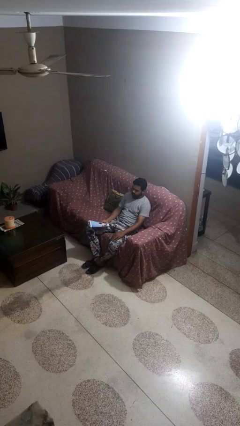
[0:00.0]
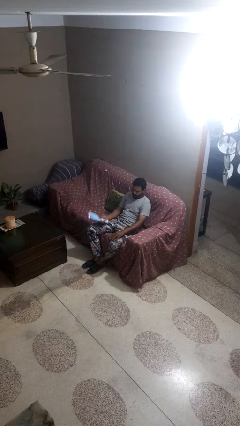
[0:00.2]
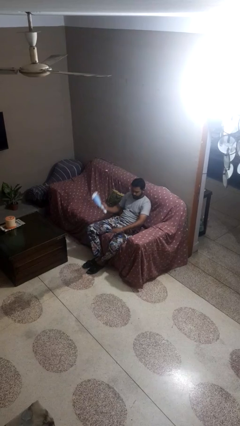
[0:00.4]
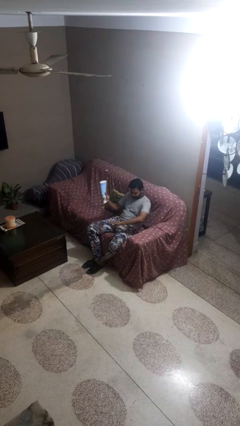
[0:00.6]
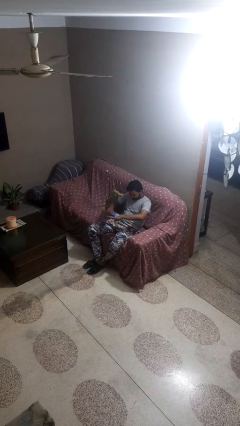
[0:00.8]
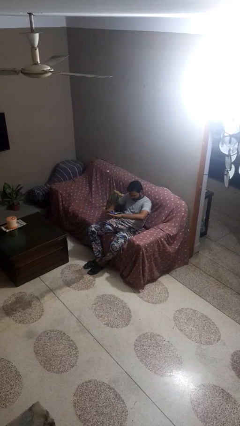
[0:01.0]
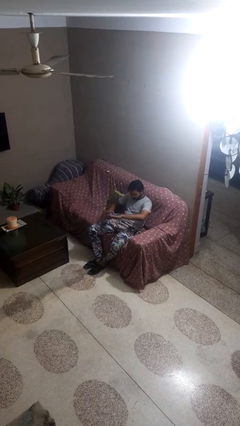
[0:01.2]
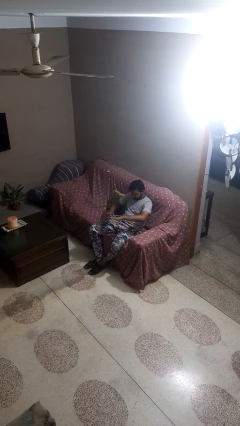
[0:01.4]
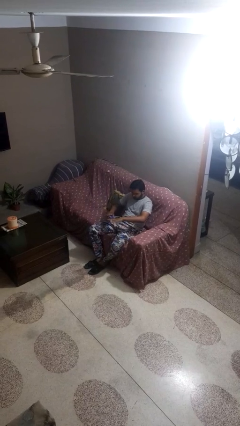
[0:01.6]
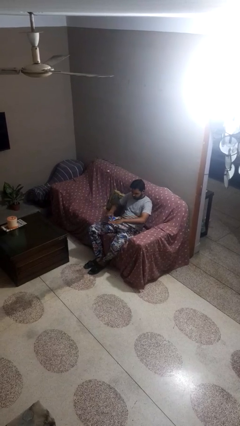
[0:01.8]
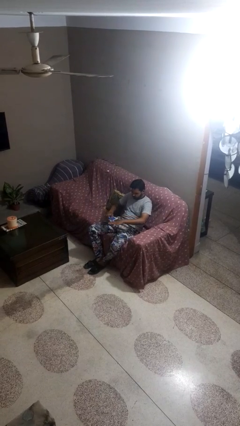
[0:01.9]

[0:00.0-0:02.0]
person swats bug

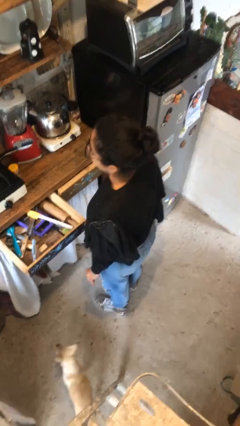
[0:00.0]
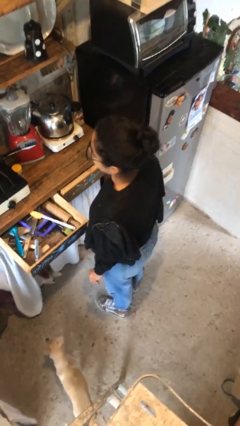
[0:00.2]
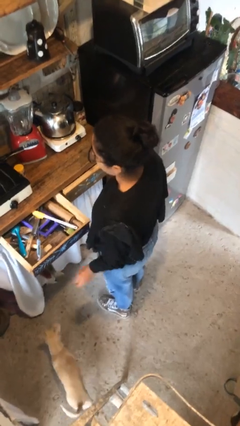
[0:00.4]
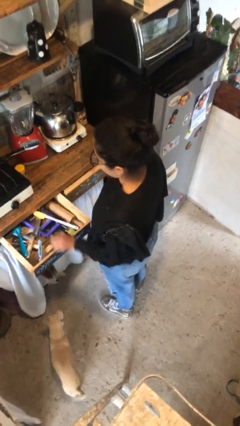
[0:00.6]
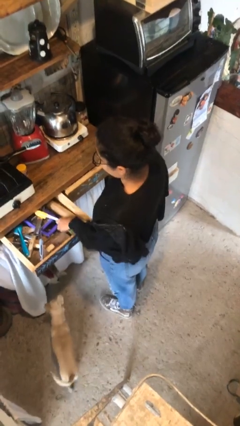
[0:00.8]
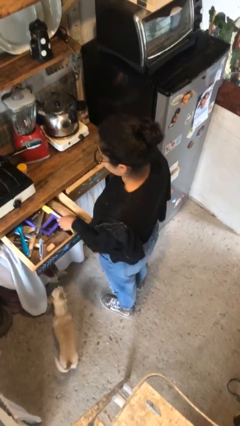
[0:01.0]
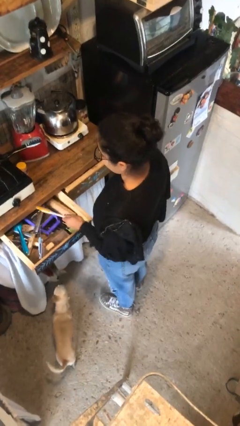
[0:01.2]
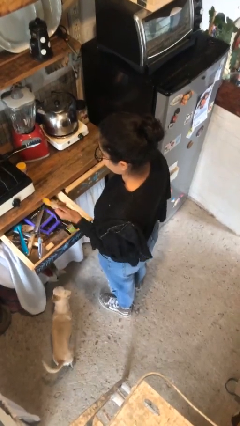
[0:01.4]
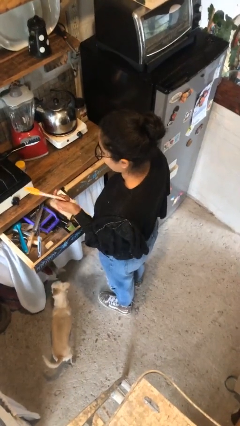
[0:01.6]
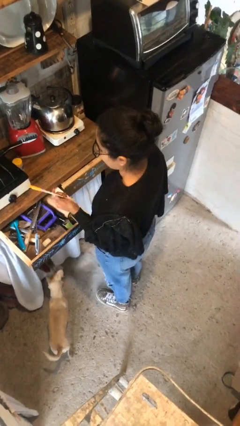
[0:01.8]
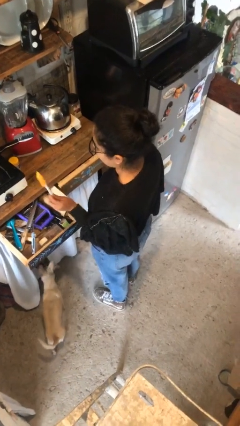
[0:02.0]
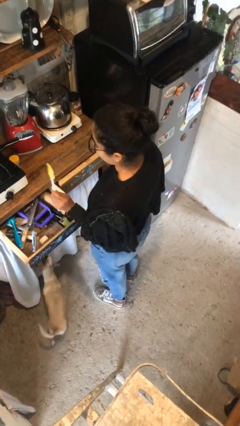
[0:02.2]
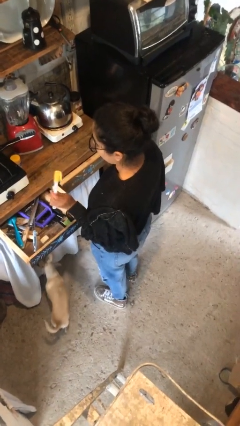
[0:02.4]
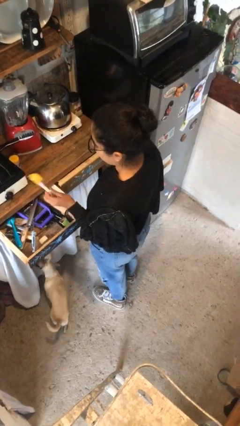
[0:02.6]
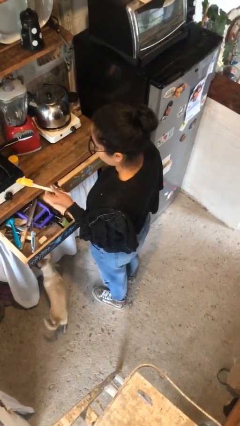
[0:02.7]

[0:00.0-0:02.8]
person takes object from kitchen drawer

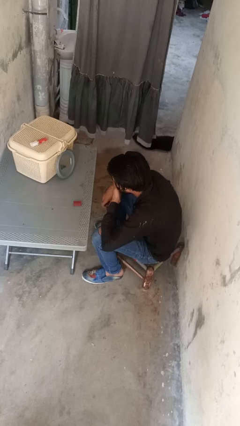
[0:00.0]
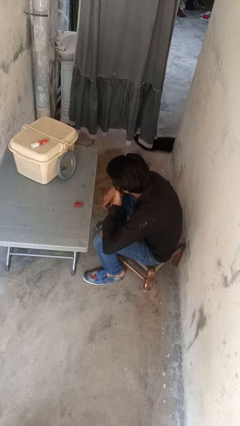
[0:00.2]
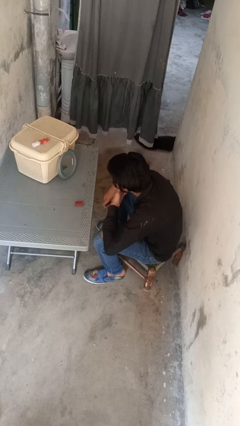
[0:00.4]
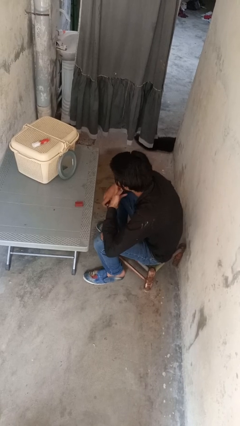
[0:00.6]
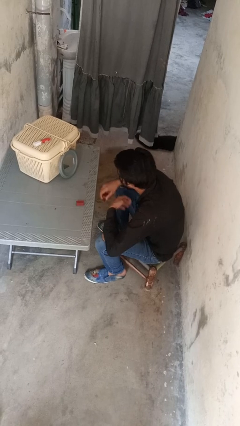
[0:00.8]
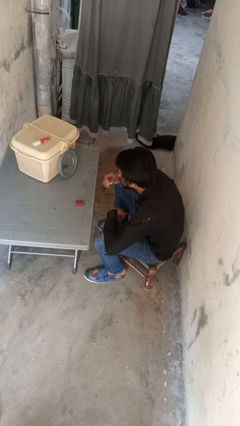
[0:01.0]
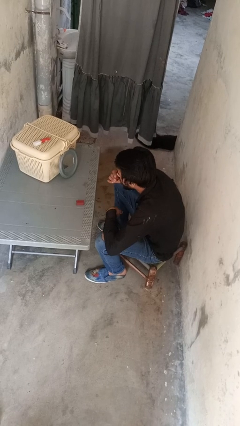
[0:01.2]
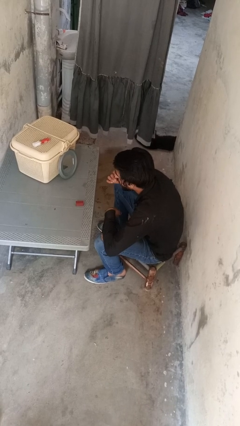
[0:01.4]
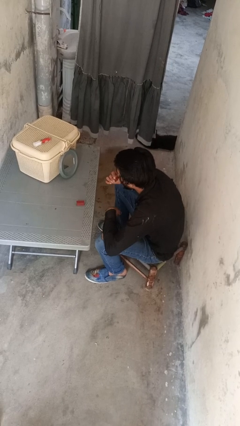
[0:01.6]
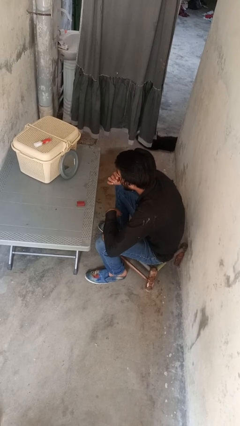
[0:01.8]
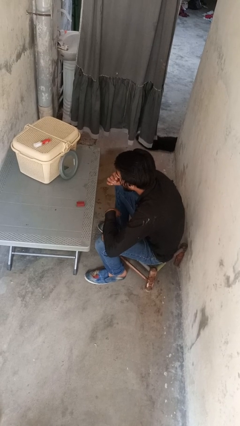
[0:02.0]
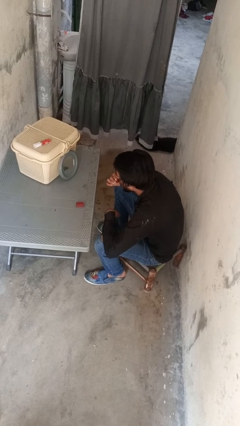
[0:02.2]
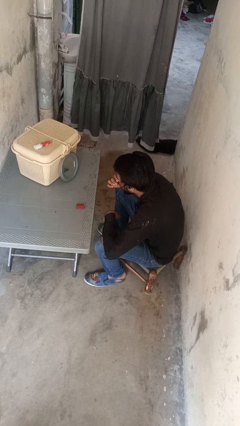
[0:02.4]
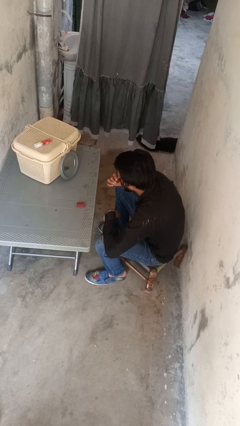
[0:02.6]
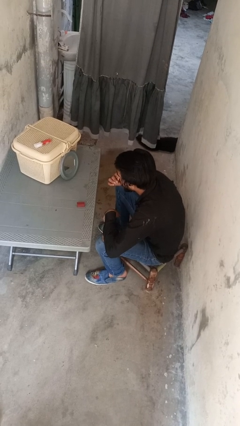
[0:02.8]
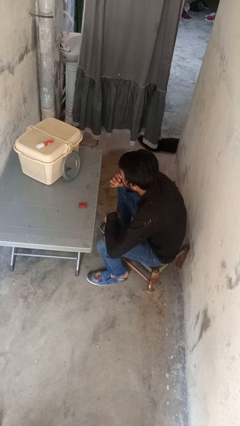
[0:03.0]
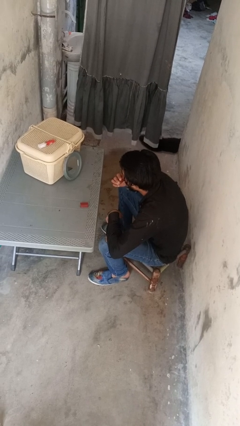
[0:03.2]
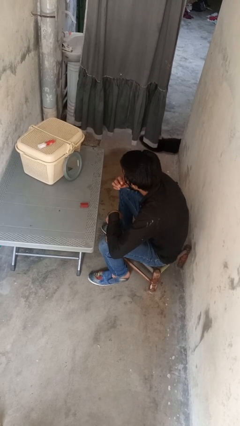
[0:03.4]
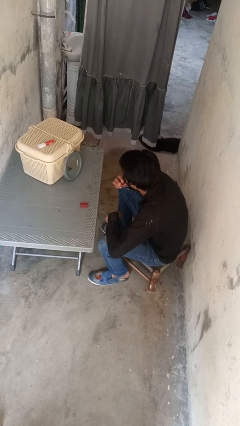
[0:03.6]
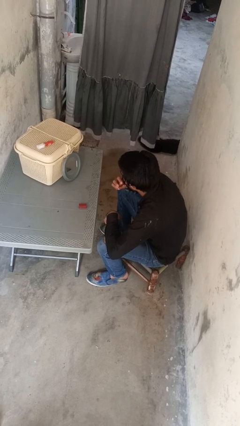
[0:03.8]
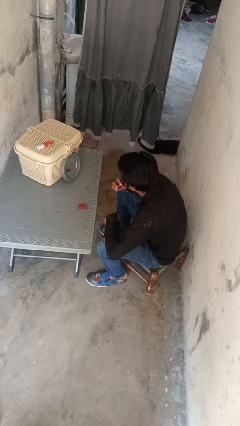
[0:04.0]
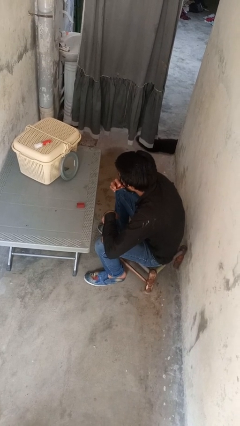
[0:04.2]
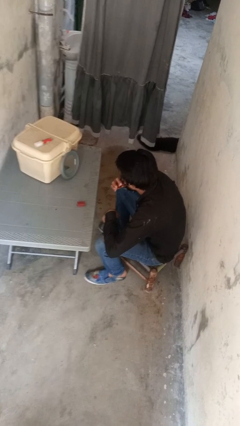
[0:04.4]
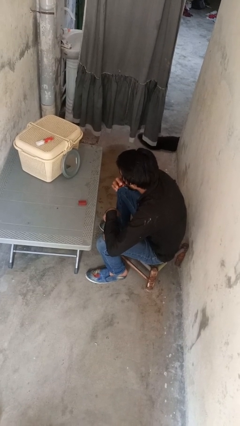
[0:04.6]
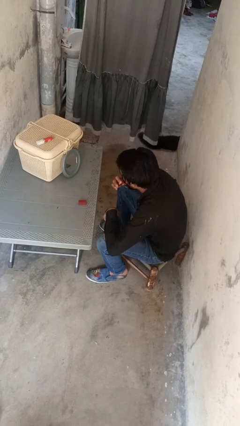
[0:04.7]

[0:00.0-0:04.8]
person applies lip makeup

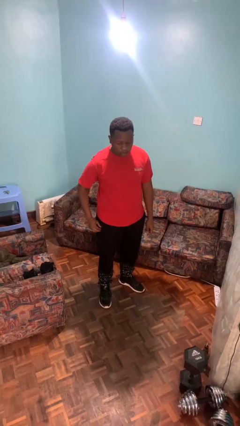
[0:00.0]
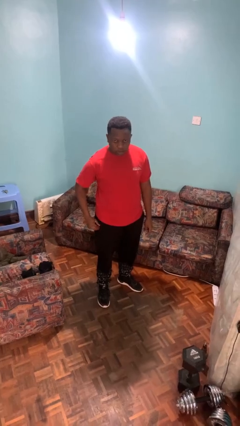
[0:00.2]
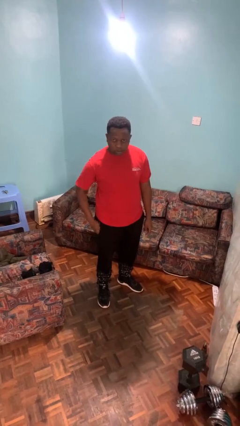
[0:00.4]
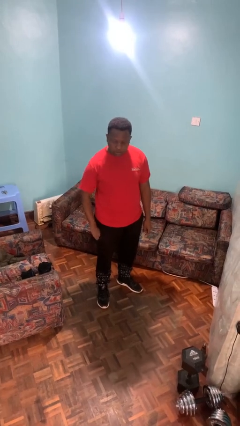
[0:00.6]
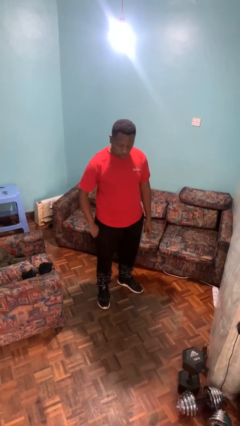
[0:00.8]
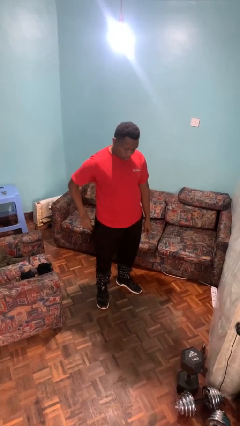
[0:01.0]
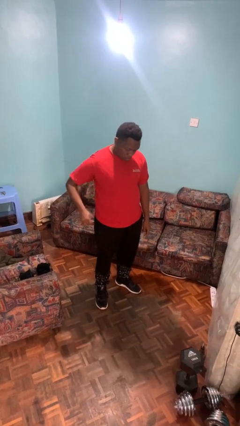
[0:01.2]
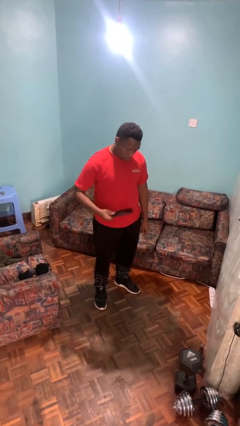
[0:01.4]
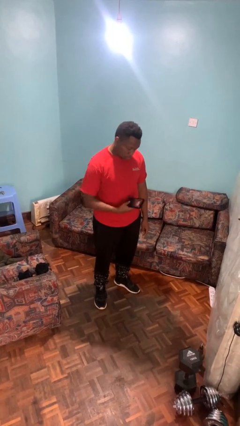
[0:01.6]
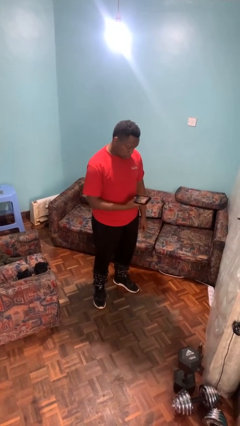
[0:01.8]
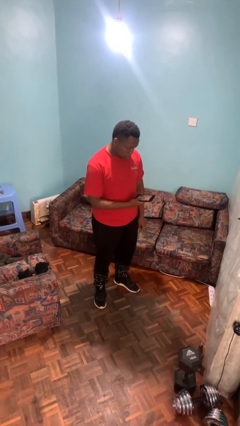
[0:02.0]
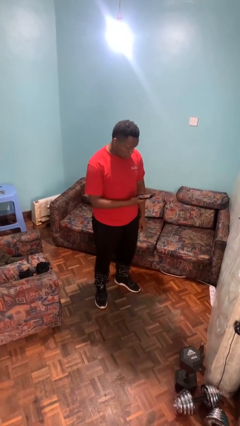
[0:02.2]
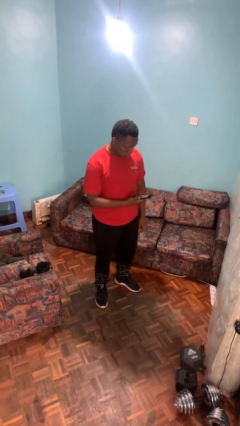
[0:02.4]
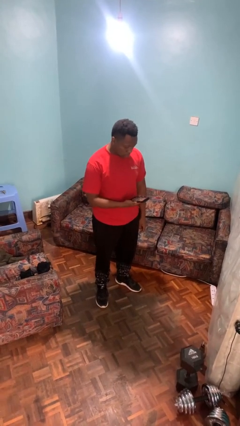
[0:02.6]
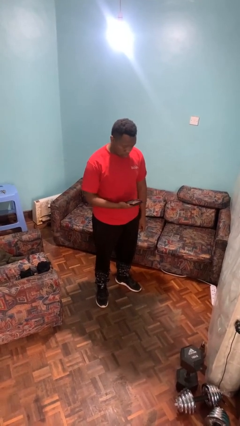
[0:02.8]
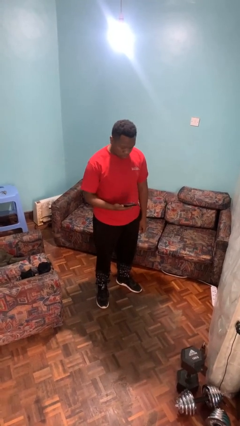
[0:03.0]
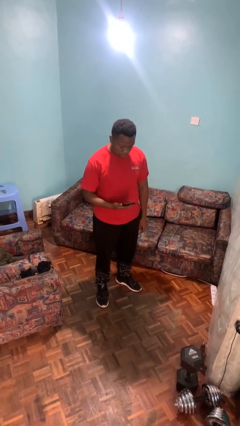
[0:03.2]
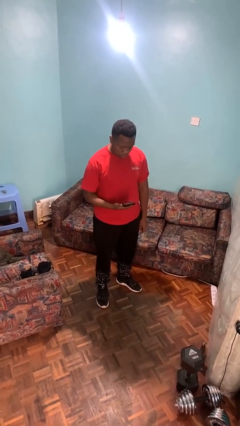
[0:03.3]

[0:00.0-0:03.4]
person takes phone from pocket

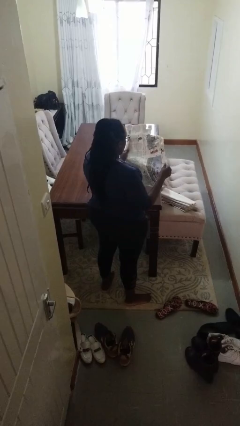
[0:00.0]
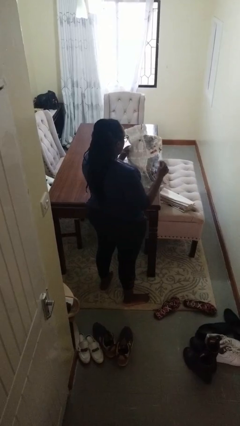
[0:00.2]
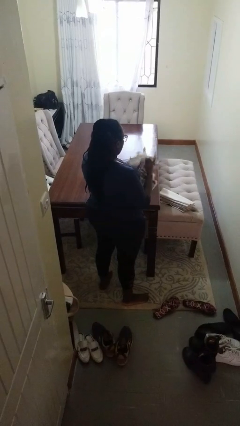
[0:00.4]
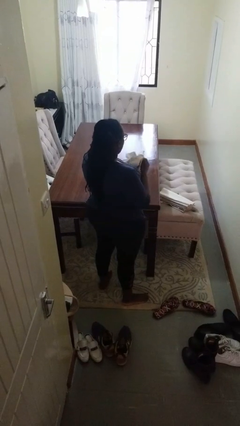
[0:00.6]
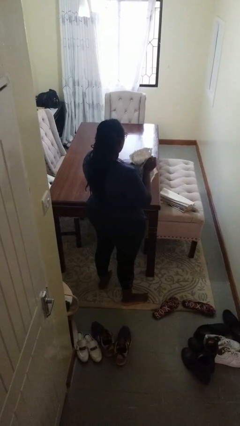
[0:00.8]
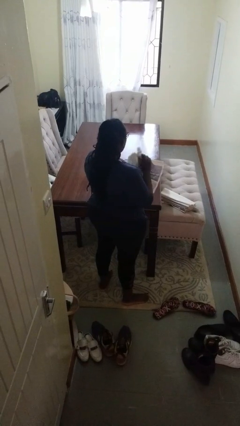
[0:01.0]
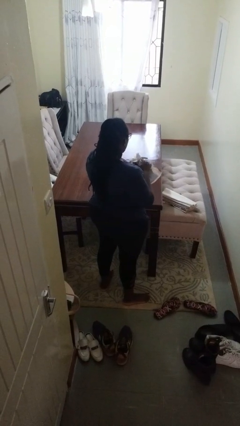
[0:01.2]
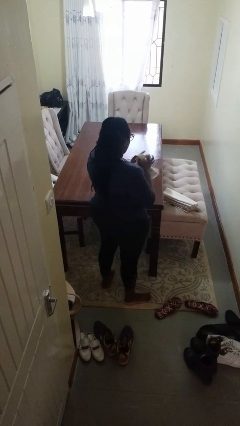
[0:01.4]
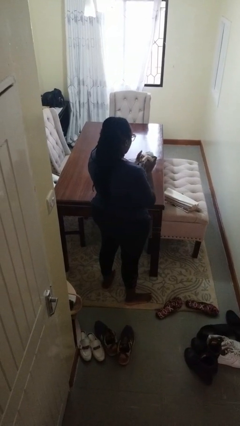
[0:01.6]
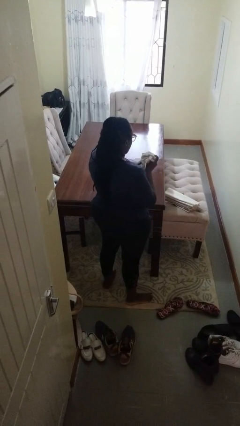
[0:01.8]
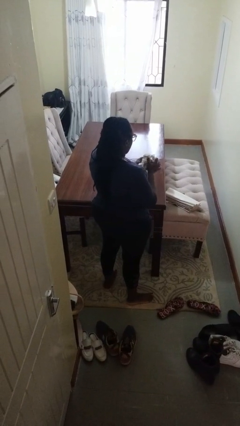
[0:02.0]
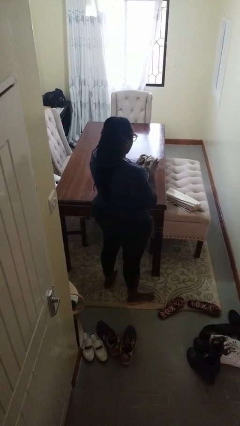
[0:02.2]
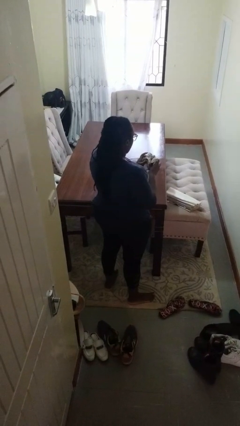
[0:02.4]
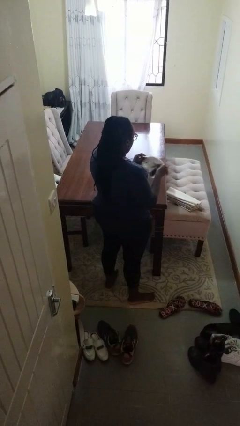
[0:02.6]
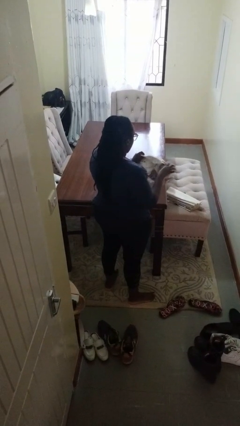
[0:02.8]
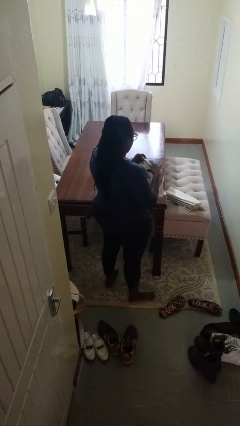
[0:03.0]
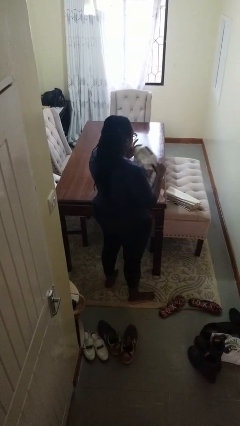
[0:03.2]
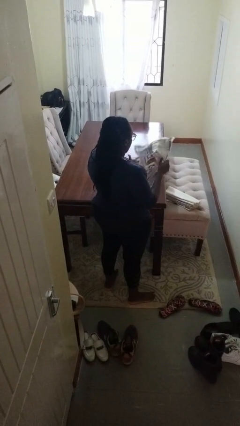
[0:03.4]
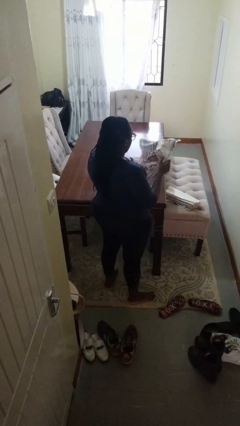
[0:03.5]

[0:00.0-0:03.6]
person crumples paper

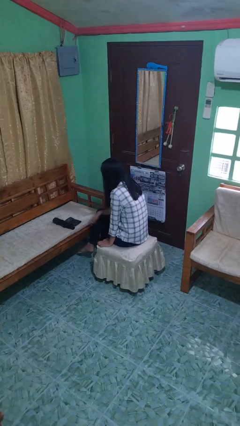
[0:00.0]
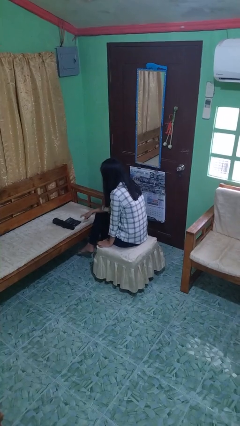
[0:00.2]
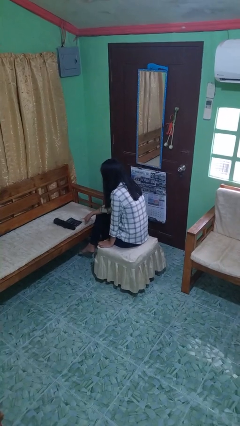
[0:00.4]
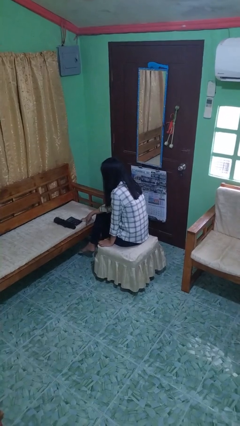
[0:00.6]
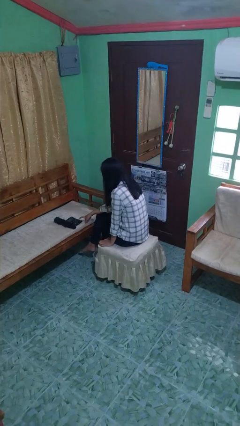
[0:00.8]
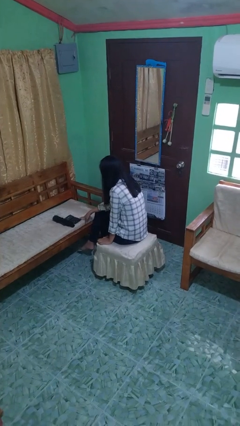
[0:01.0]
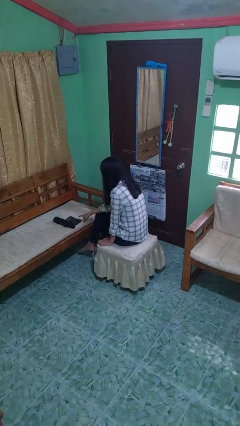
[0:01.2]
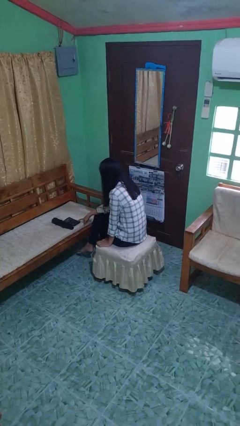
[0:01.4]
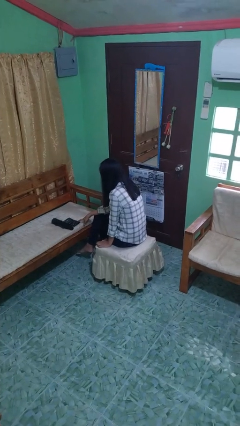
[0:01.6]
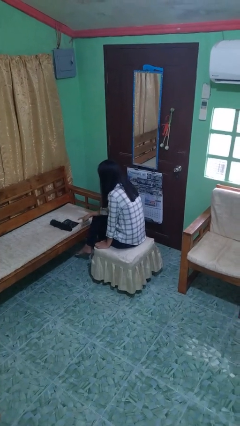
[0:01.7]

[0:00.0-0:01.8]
person taps object with finger
